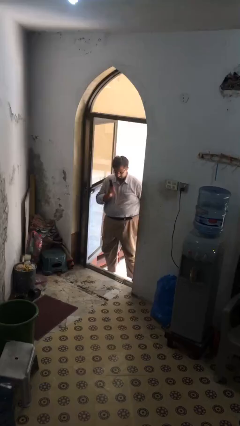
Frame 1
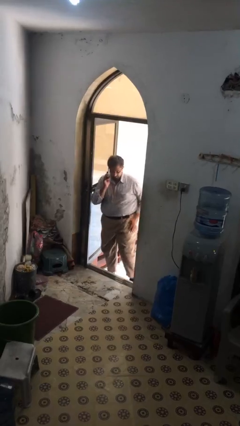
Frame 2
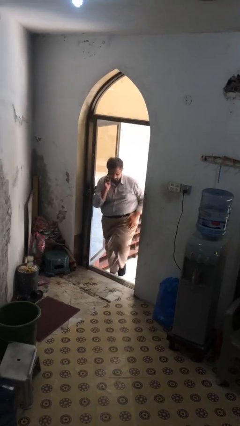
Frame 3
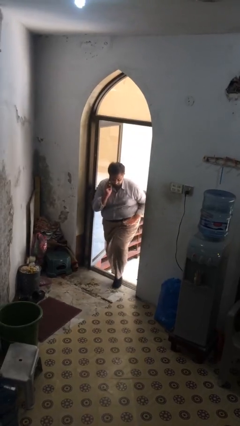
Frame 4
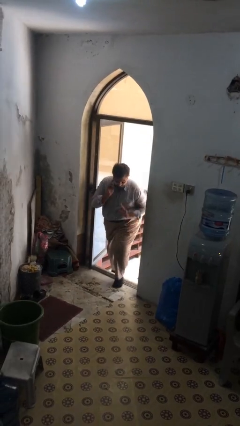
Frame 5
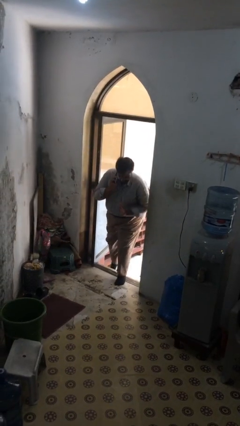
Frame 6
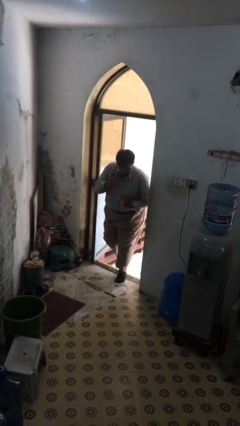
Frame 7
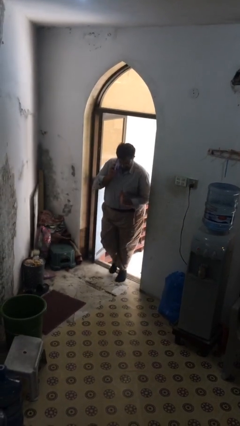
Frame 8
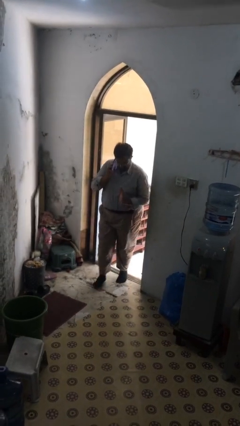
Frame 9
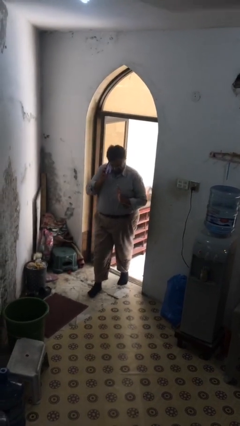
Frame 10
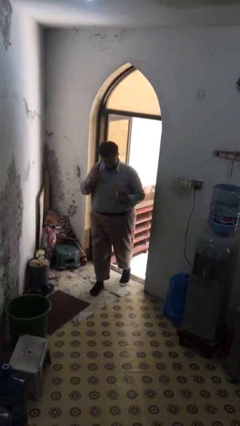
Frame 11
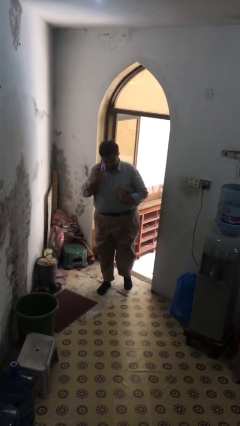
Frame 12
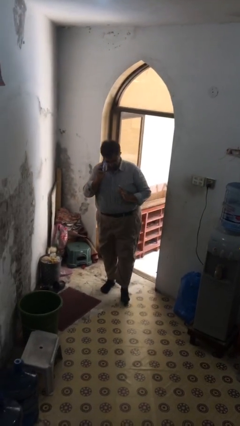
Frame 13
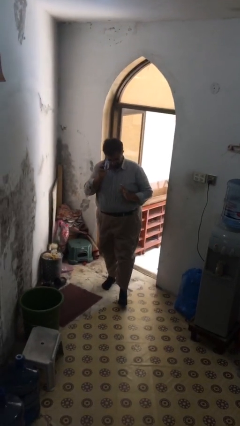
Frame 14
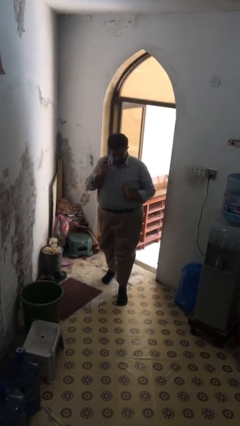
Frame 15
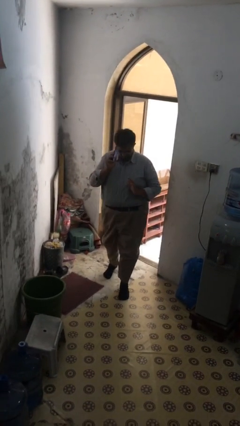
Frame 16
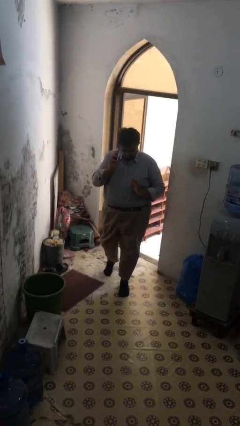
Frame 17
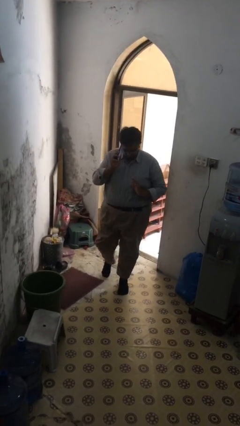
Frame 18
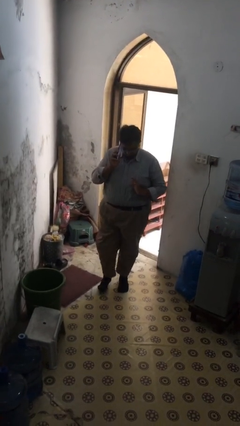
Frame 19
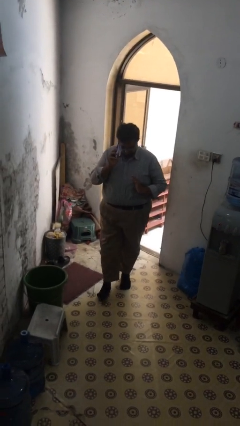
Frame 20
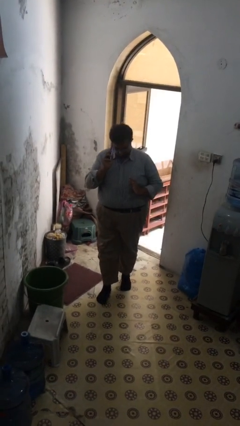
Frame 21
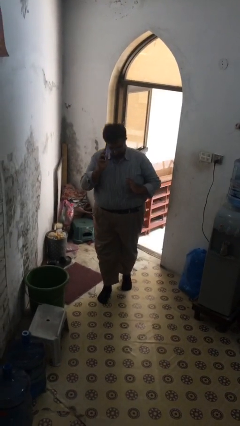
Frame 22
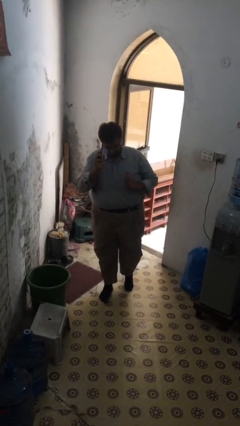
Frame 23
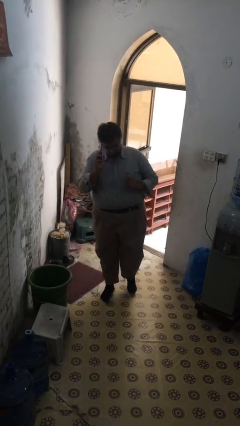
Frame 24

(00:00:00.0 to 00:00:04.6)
person enters scene through structure

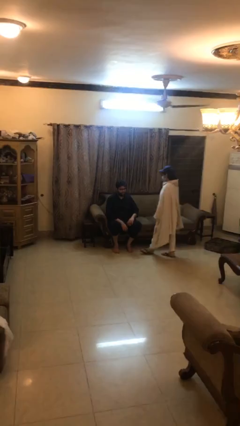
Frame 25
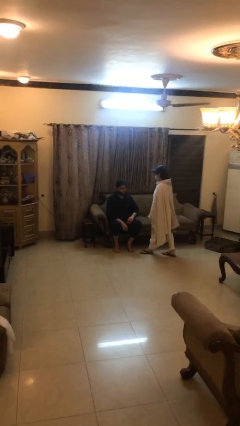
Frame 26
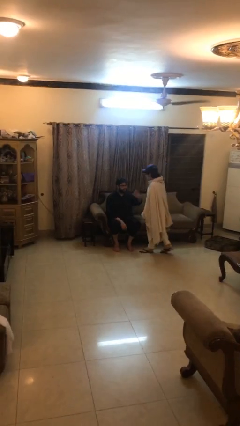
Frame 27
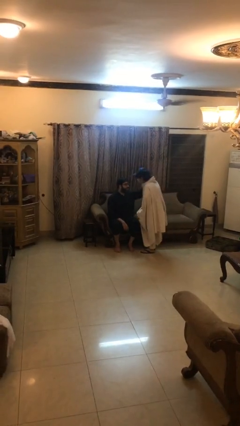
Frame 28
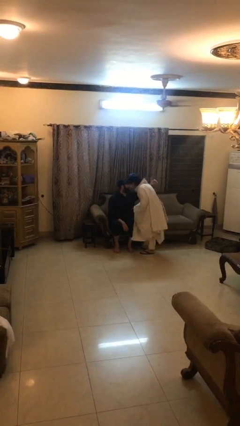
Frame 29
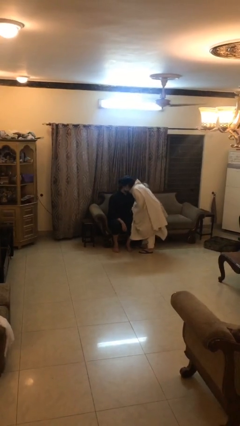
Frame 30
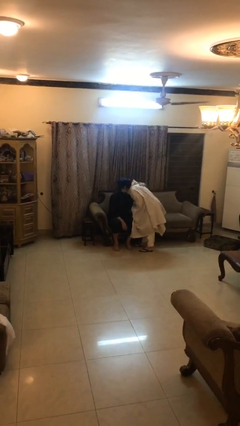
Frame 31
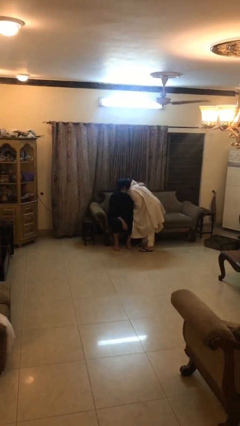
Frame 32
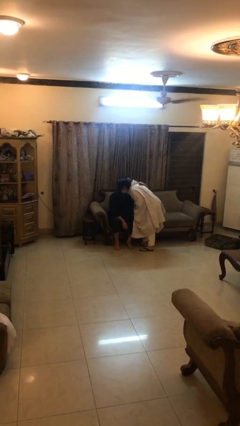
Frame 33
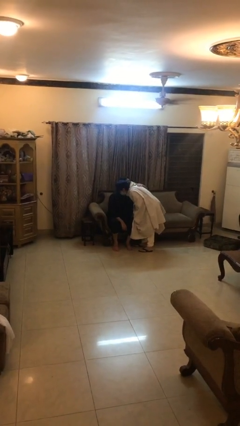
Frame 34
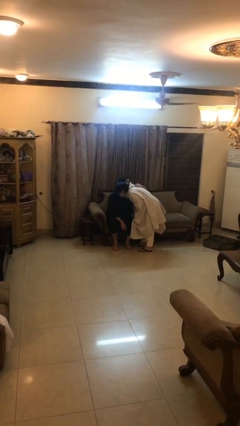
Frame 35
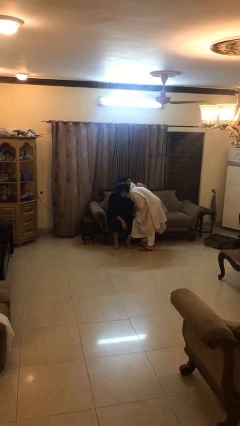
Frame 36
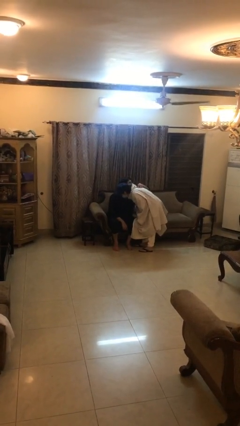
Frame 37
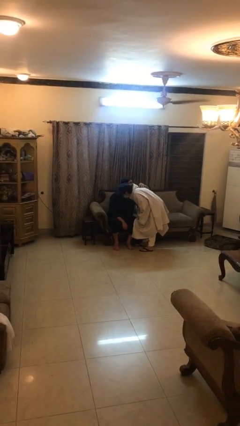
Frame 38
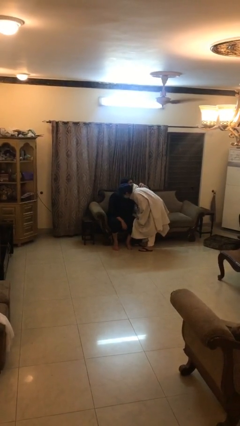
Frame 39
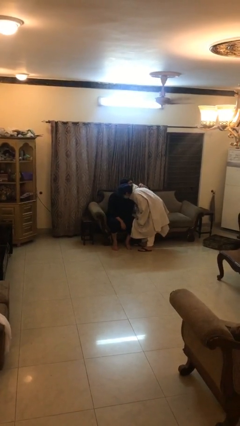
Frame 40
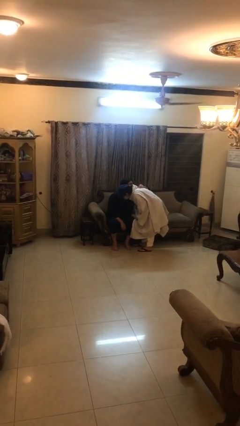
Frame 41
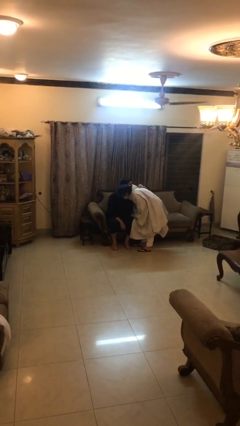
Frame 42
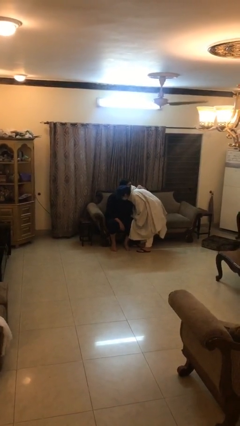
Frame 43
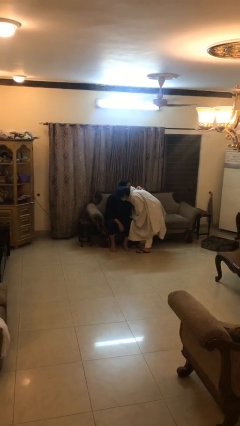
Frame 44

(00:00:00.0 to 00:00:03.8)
person embraces person

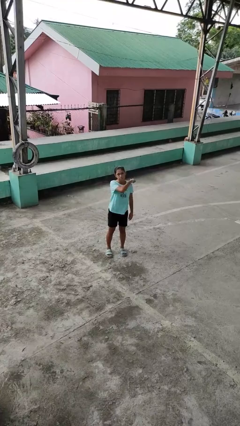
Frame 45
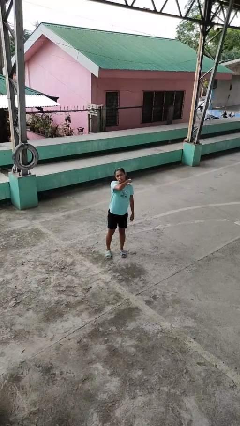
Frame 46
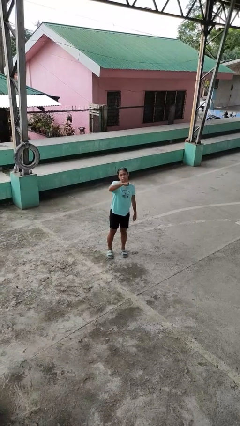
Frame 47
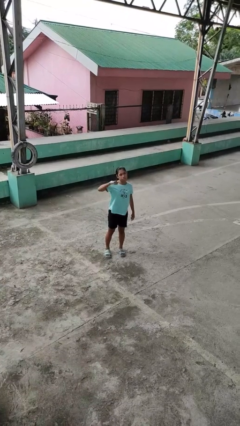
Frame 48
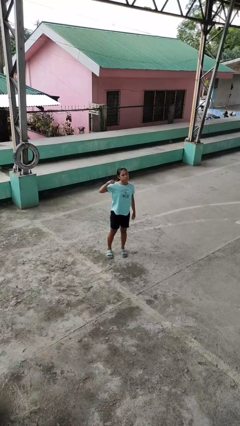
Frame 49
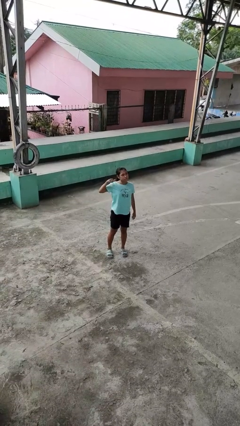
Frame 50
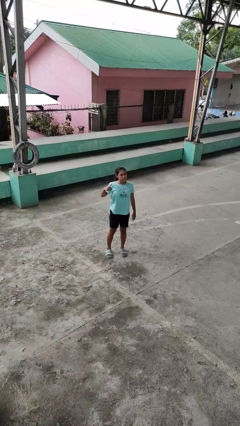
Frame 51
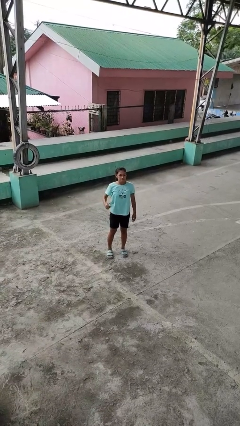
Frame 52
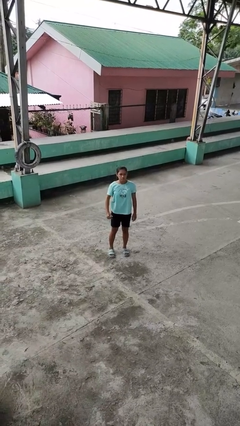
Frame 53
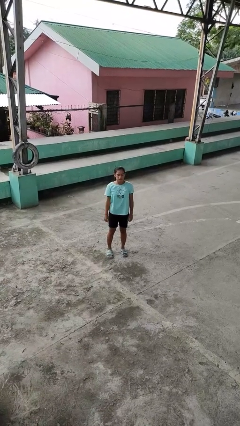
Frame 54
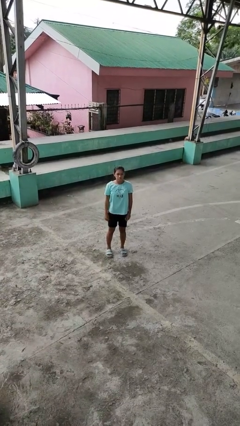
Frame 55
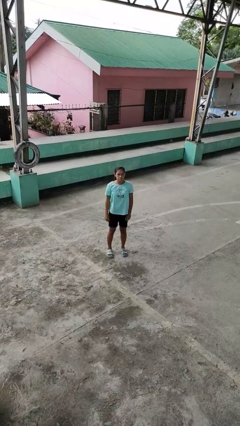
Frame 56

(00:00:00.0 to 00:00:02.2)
person gestures cut

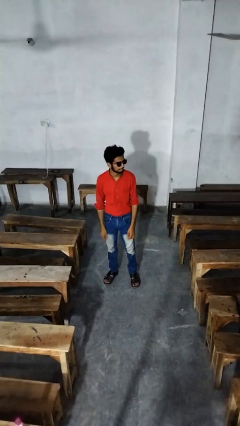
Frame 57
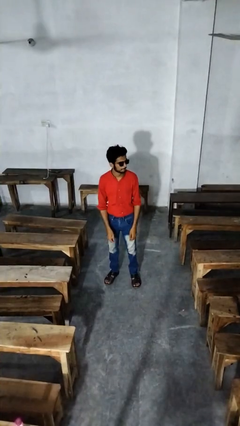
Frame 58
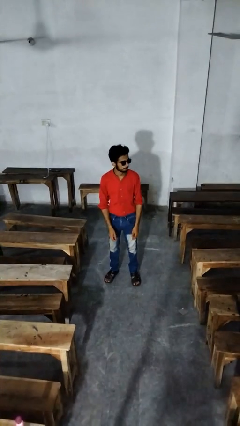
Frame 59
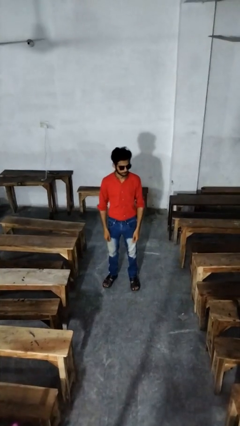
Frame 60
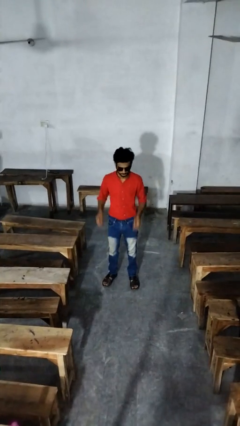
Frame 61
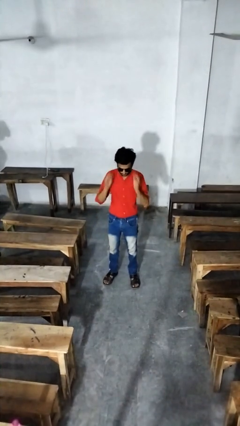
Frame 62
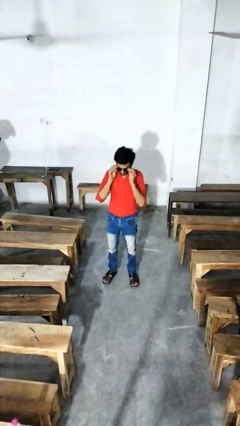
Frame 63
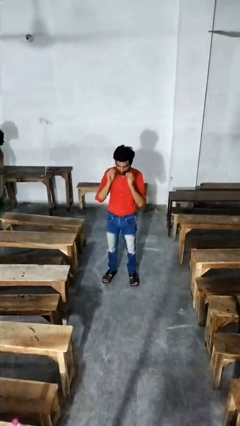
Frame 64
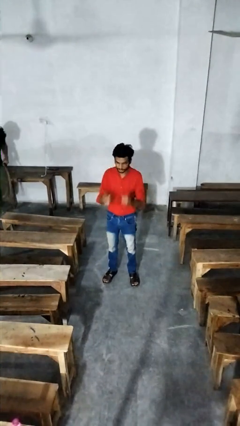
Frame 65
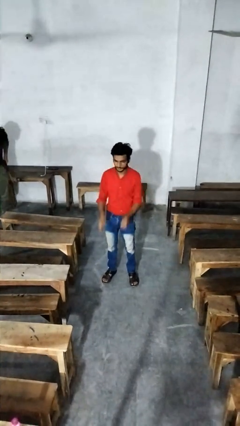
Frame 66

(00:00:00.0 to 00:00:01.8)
person takes off sunglasses

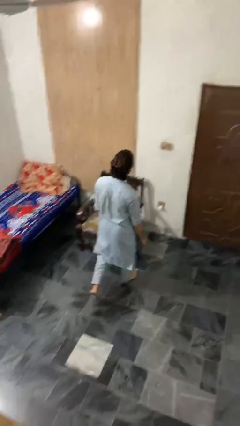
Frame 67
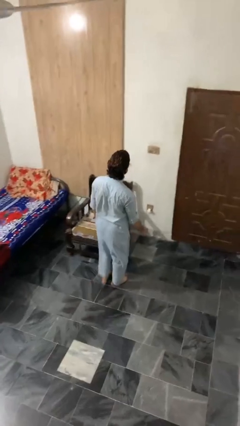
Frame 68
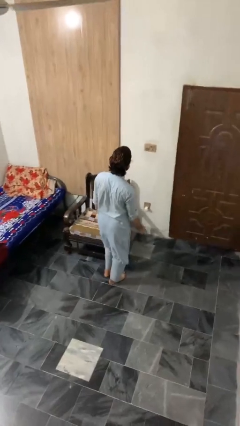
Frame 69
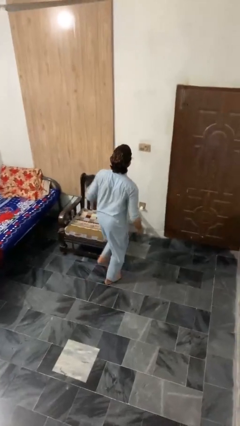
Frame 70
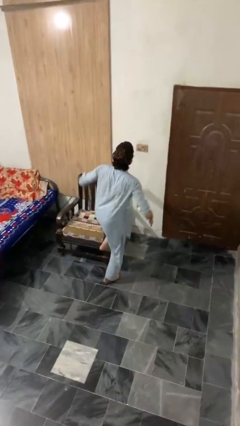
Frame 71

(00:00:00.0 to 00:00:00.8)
person stubs toe

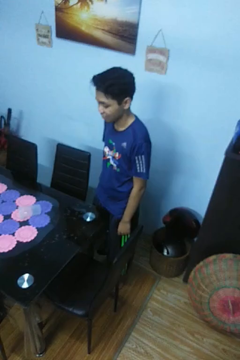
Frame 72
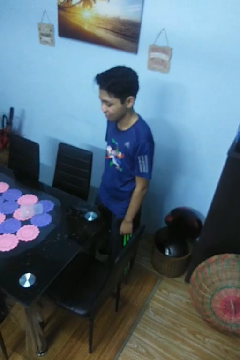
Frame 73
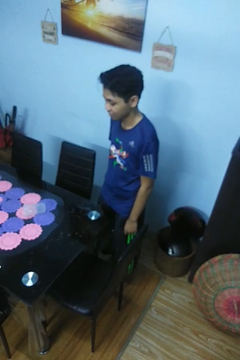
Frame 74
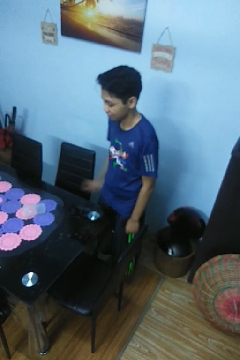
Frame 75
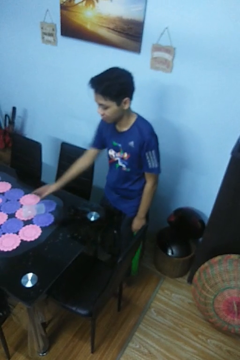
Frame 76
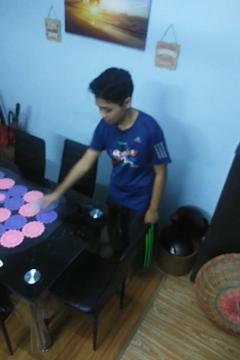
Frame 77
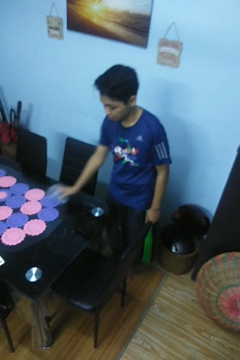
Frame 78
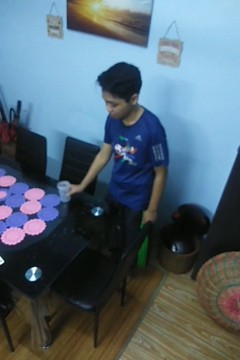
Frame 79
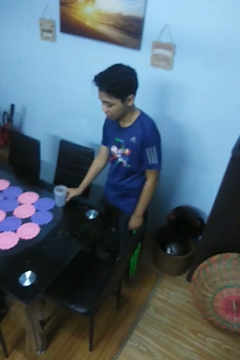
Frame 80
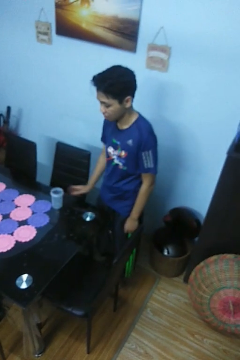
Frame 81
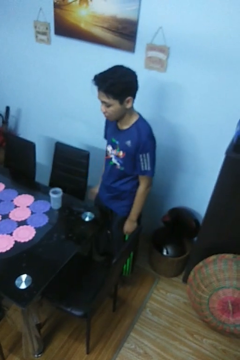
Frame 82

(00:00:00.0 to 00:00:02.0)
person sets upright glass

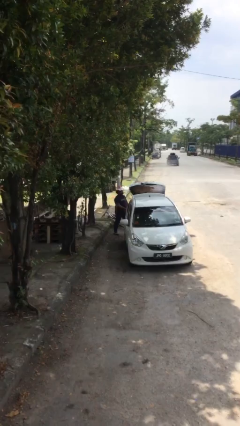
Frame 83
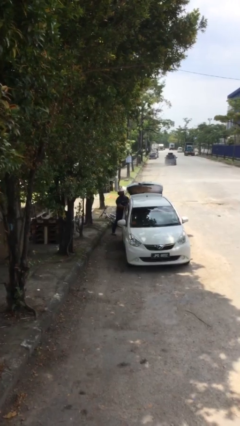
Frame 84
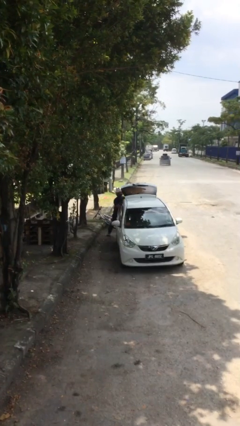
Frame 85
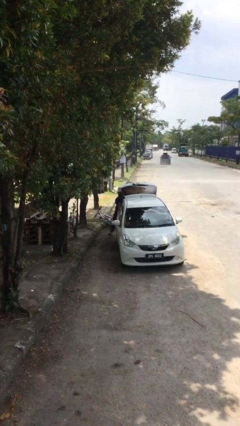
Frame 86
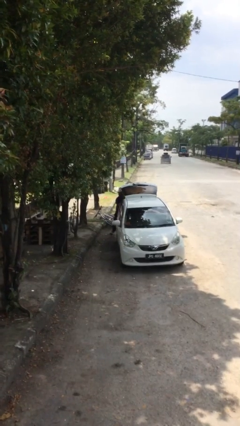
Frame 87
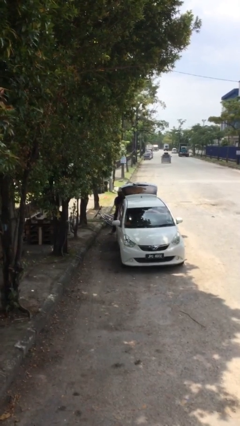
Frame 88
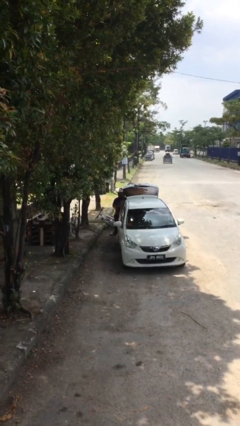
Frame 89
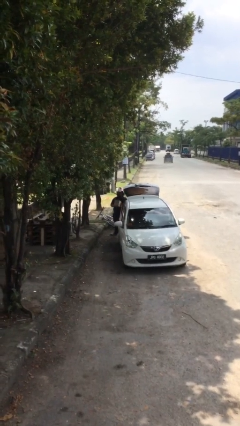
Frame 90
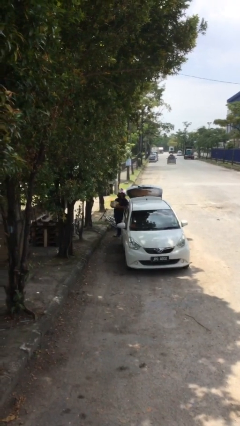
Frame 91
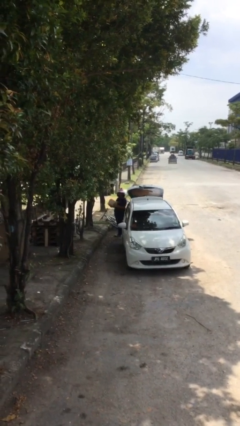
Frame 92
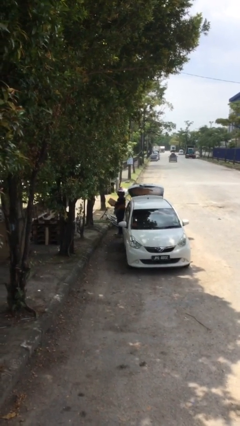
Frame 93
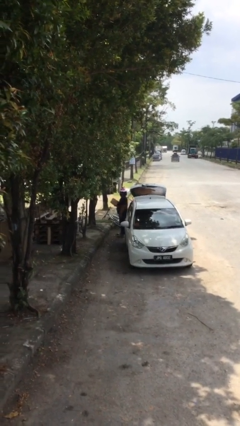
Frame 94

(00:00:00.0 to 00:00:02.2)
person unloads car
